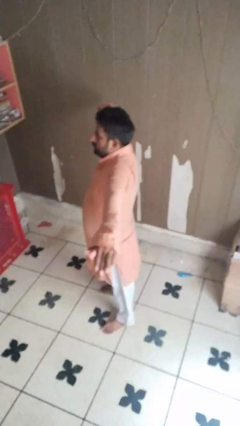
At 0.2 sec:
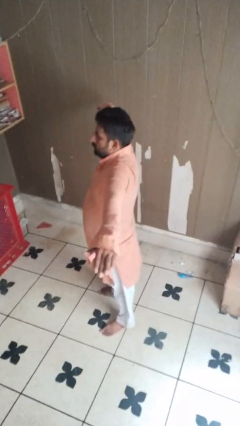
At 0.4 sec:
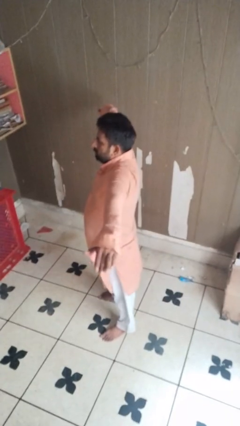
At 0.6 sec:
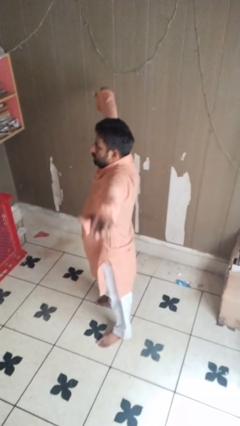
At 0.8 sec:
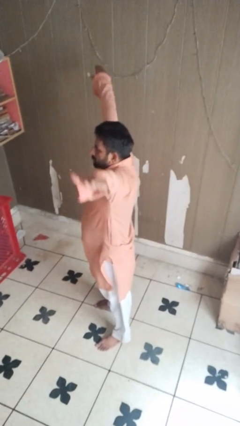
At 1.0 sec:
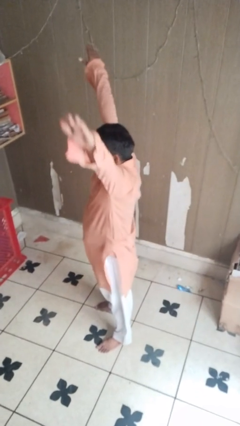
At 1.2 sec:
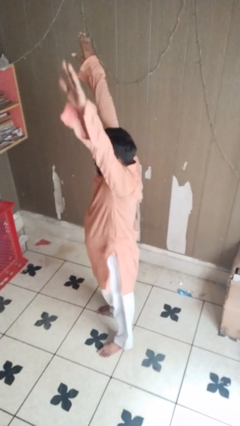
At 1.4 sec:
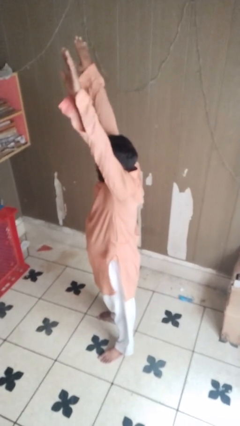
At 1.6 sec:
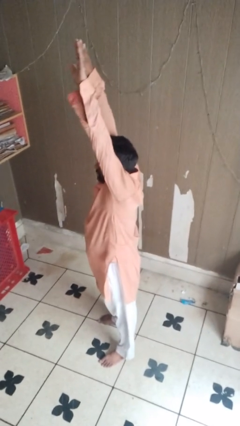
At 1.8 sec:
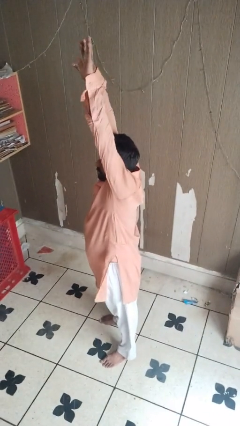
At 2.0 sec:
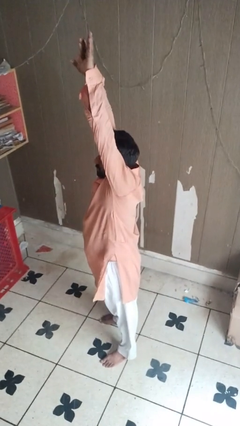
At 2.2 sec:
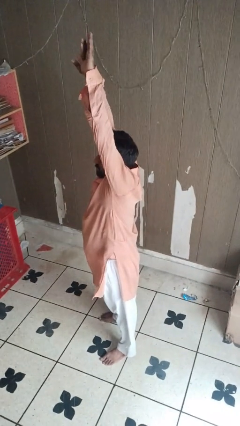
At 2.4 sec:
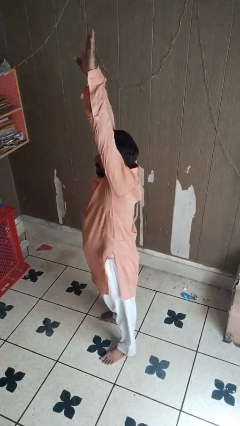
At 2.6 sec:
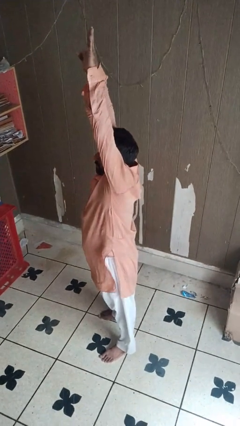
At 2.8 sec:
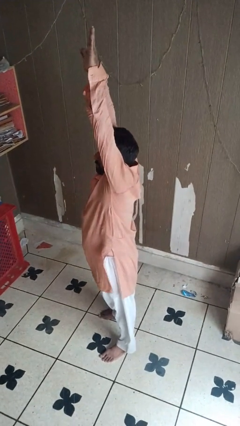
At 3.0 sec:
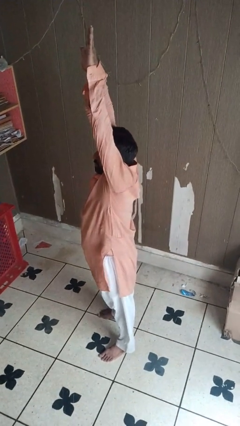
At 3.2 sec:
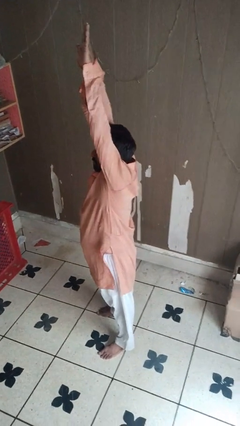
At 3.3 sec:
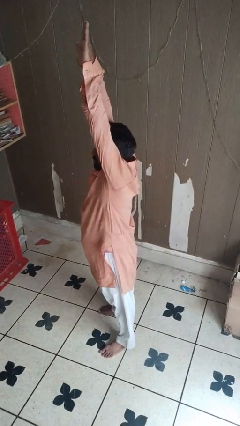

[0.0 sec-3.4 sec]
person stretches arms over head

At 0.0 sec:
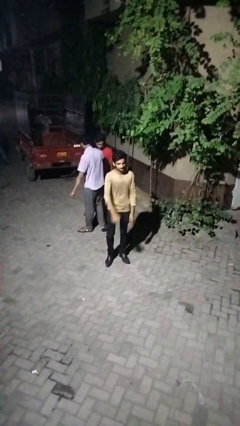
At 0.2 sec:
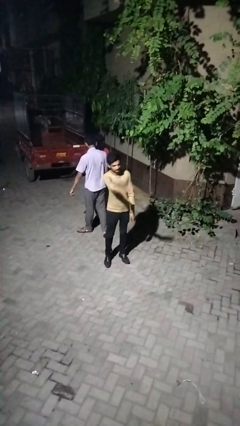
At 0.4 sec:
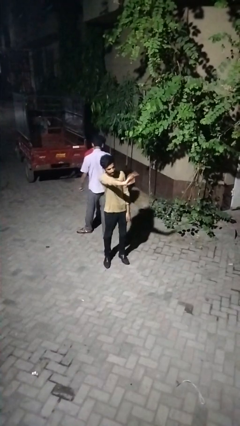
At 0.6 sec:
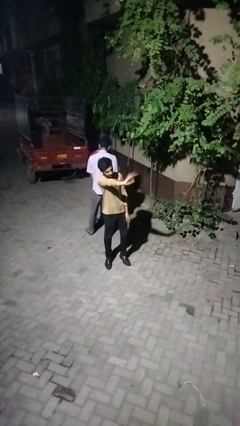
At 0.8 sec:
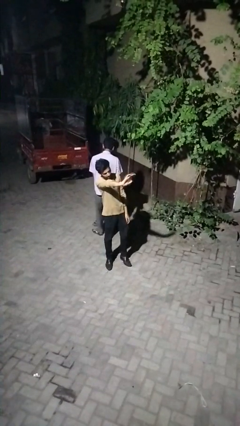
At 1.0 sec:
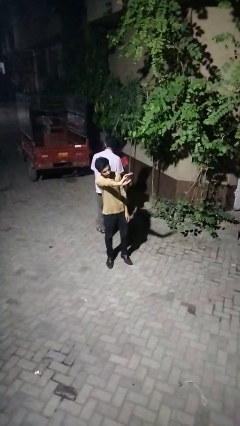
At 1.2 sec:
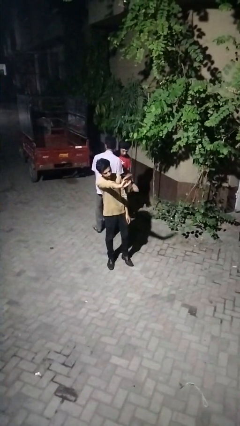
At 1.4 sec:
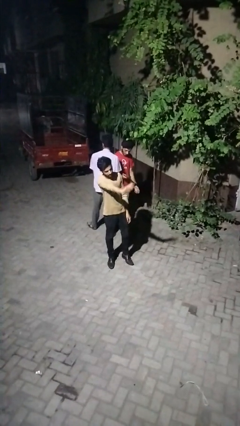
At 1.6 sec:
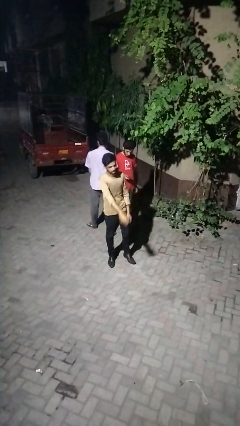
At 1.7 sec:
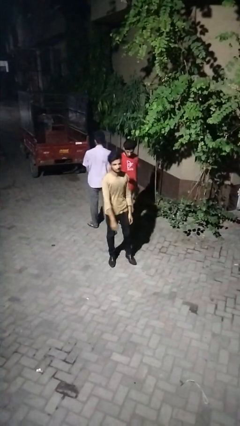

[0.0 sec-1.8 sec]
person waves at person

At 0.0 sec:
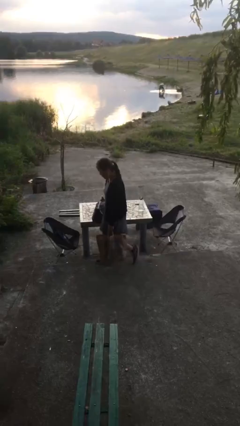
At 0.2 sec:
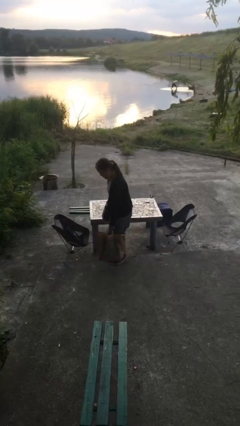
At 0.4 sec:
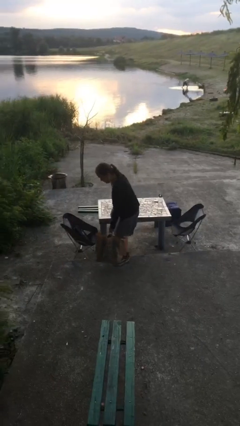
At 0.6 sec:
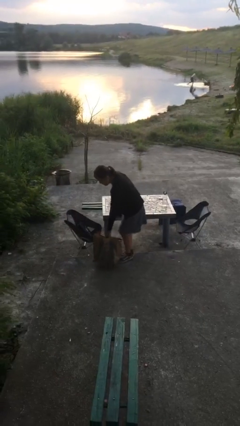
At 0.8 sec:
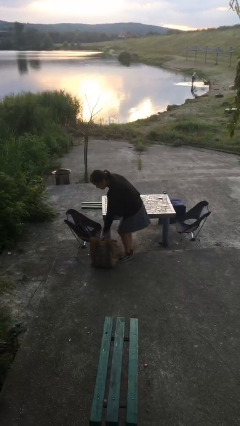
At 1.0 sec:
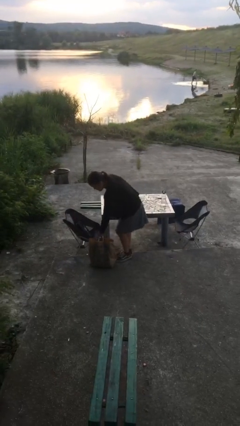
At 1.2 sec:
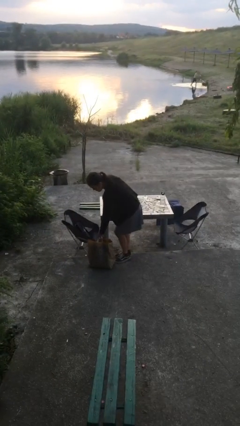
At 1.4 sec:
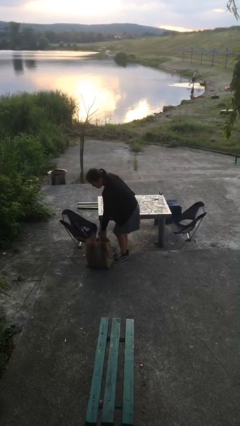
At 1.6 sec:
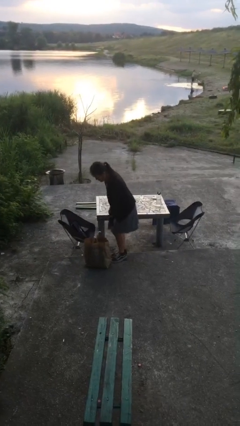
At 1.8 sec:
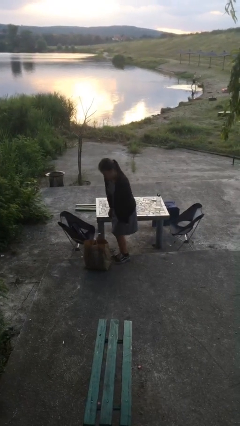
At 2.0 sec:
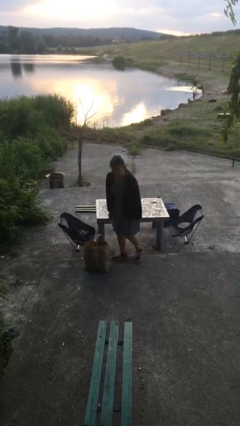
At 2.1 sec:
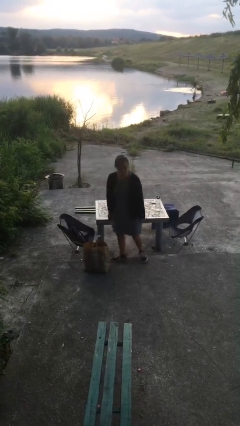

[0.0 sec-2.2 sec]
person puts down object on floor

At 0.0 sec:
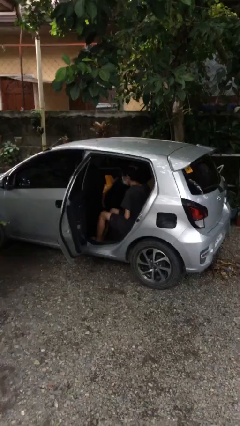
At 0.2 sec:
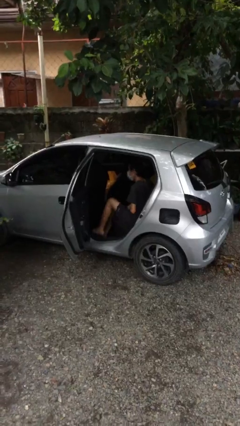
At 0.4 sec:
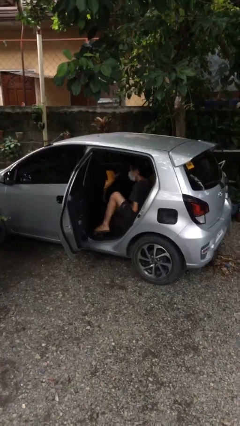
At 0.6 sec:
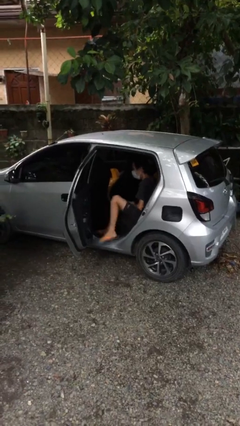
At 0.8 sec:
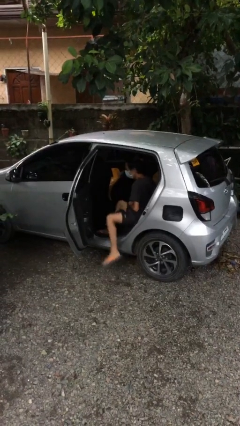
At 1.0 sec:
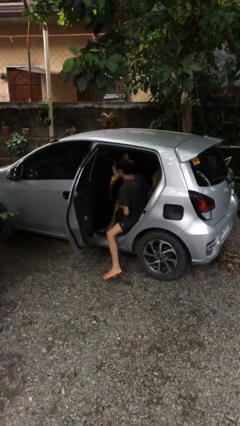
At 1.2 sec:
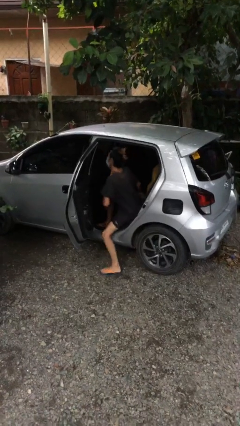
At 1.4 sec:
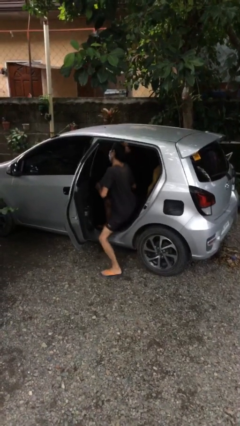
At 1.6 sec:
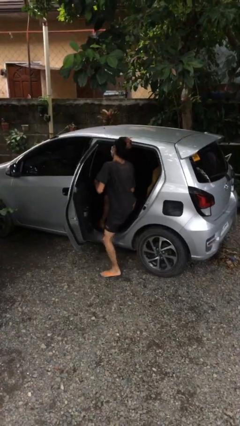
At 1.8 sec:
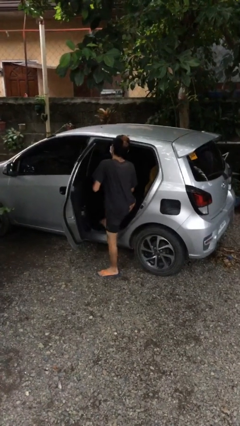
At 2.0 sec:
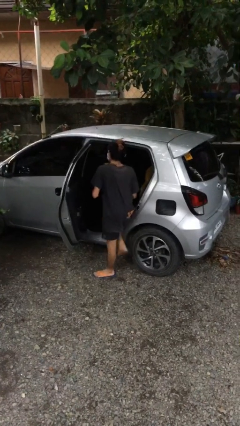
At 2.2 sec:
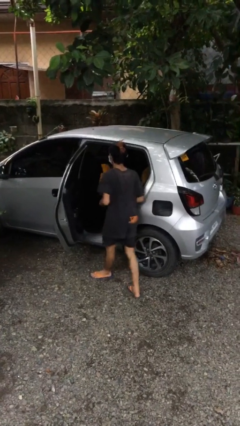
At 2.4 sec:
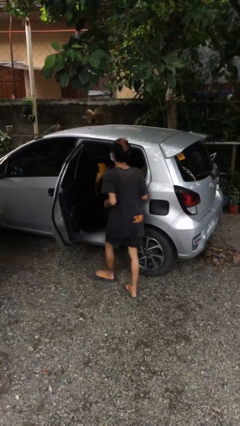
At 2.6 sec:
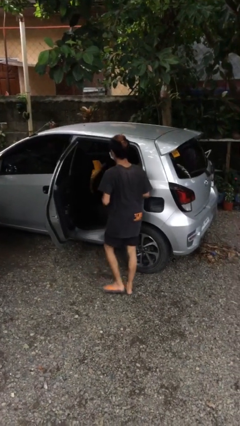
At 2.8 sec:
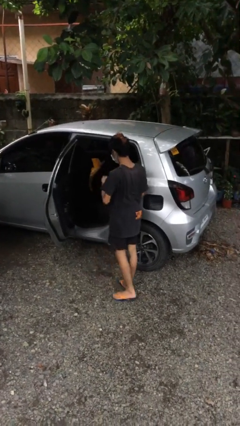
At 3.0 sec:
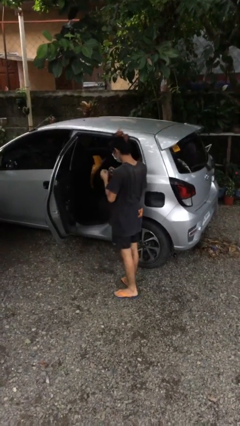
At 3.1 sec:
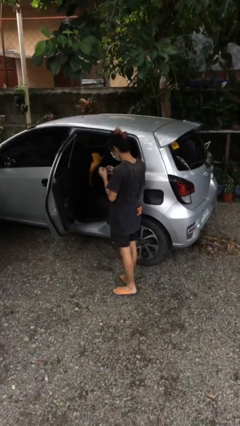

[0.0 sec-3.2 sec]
person exits car

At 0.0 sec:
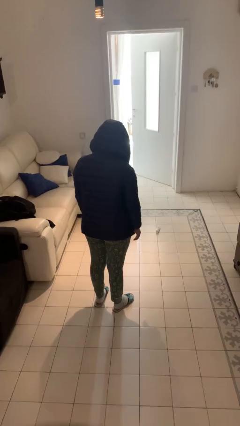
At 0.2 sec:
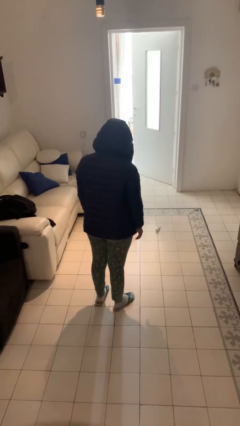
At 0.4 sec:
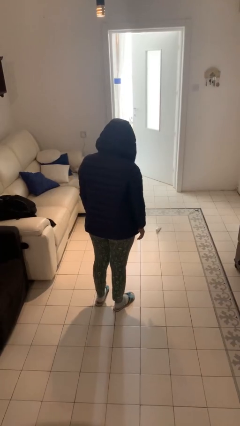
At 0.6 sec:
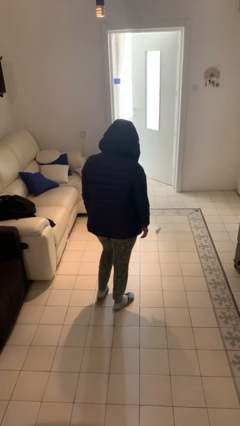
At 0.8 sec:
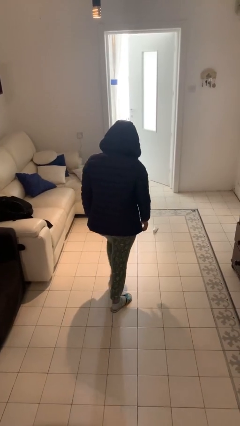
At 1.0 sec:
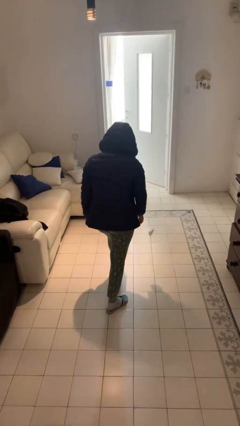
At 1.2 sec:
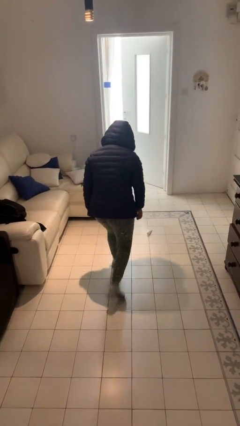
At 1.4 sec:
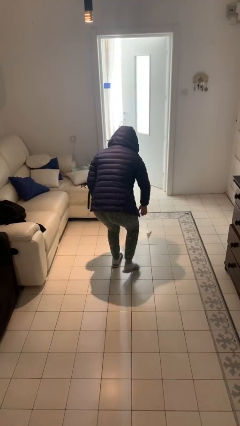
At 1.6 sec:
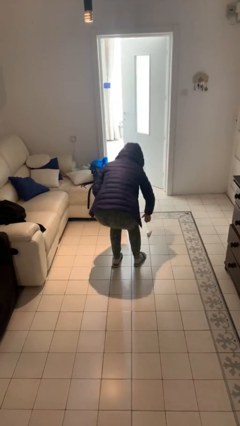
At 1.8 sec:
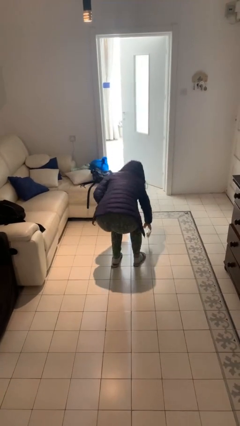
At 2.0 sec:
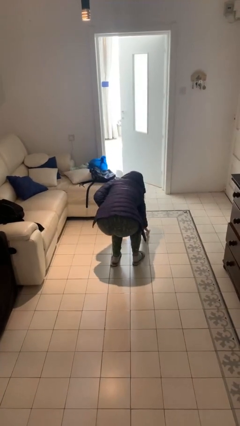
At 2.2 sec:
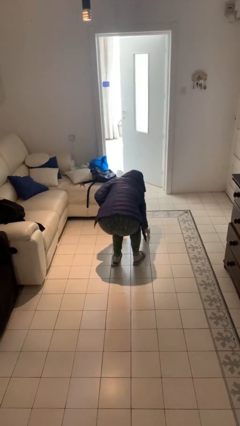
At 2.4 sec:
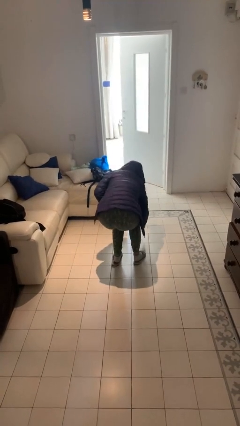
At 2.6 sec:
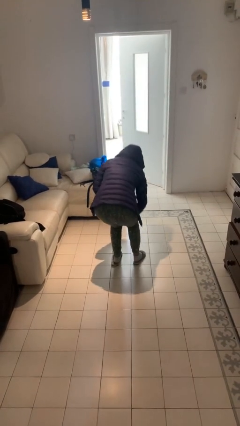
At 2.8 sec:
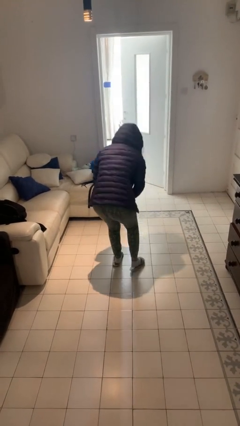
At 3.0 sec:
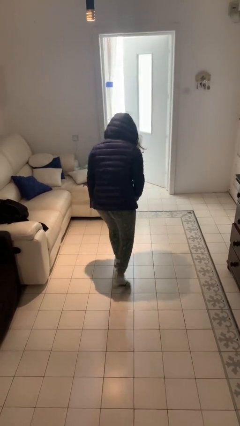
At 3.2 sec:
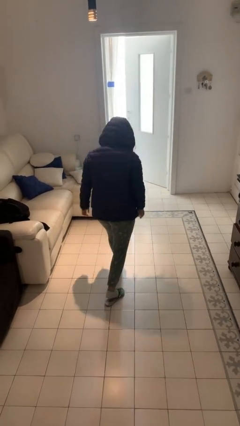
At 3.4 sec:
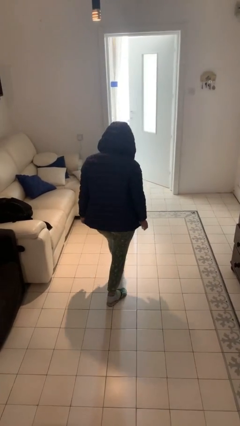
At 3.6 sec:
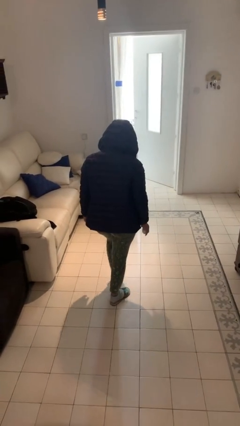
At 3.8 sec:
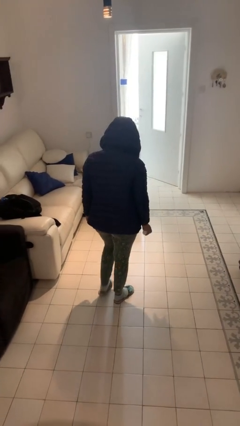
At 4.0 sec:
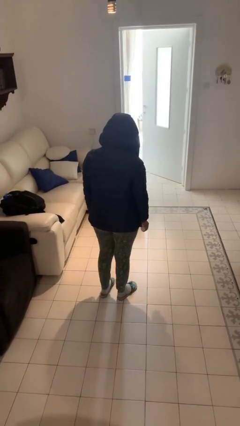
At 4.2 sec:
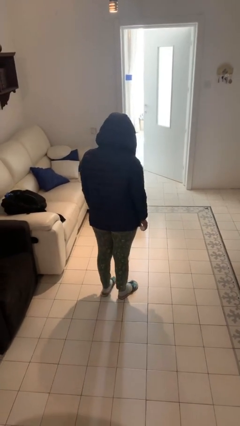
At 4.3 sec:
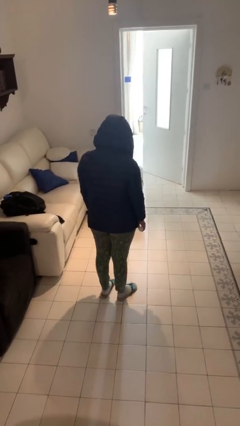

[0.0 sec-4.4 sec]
person picks up object from floor

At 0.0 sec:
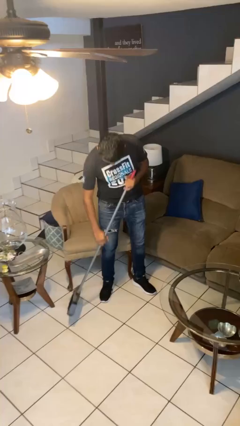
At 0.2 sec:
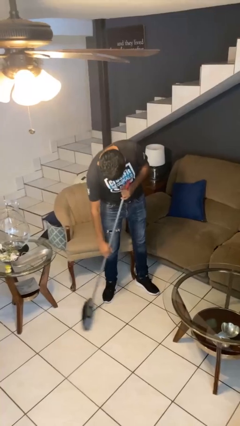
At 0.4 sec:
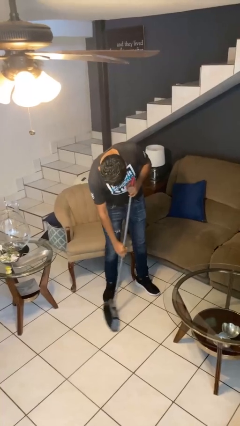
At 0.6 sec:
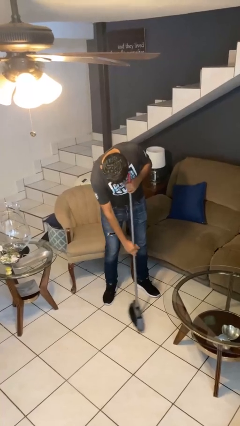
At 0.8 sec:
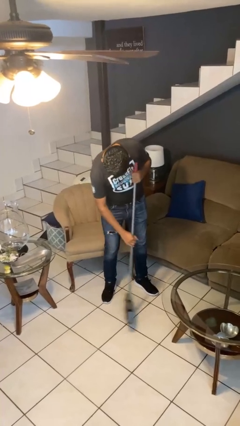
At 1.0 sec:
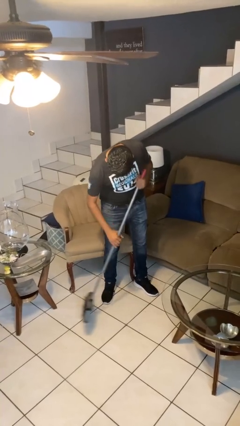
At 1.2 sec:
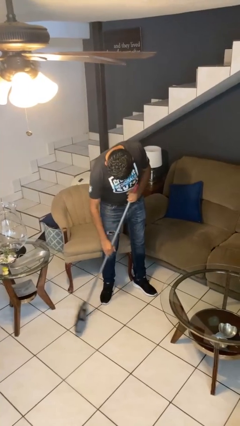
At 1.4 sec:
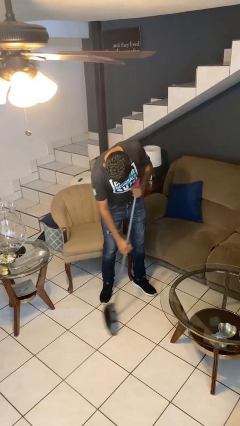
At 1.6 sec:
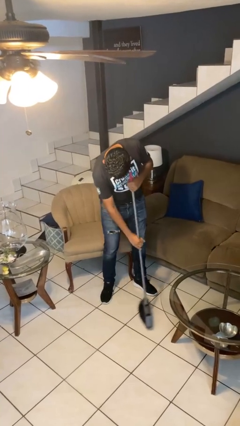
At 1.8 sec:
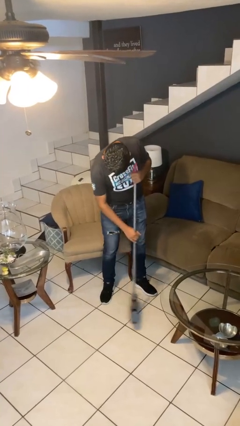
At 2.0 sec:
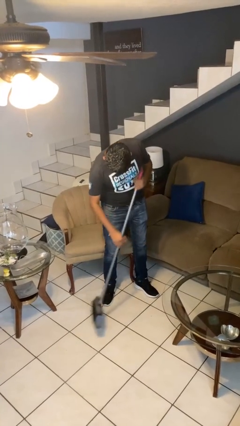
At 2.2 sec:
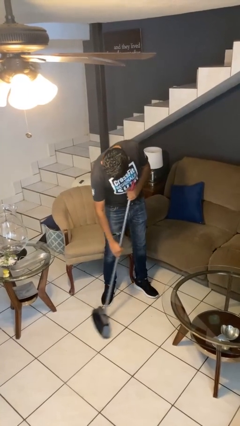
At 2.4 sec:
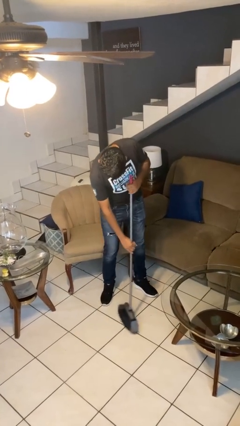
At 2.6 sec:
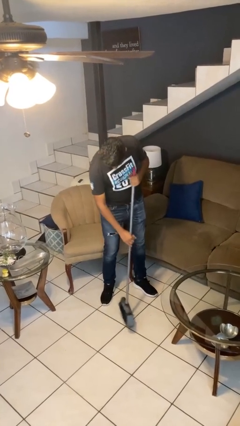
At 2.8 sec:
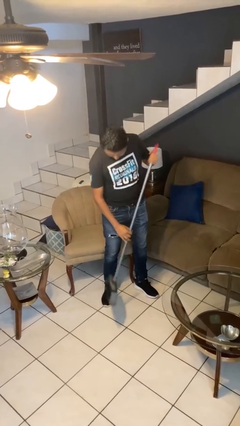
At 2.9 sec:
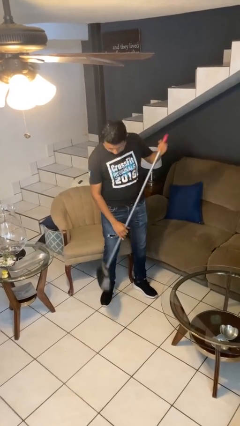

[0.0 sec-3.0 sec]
person sweeps floor
